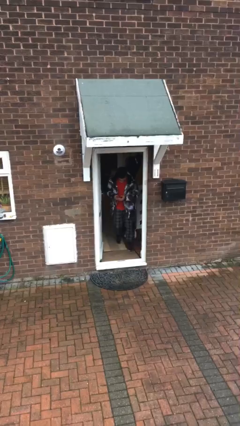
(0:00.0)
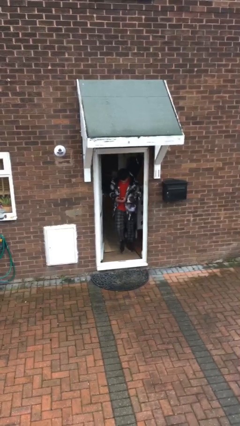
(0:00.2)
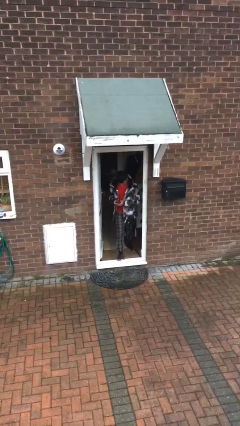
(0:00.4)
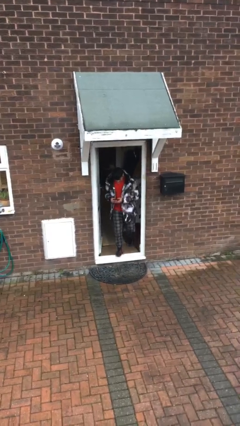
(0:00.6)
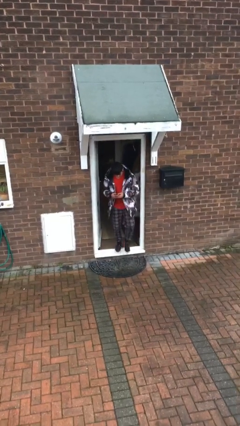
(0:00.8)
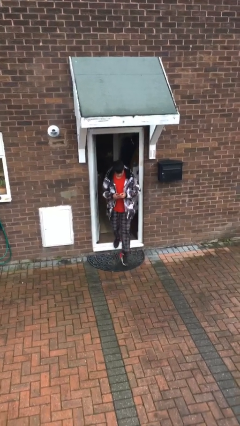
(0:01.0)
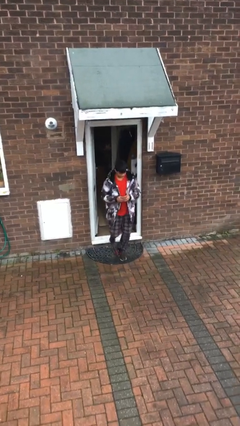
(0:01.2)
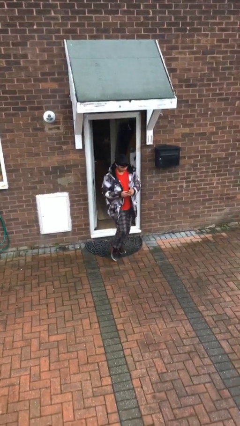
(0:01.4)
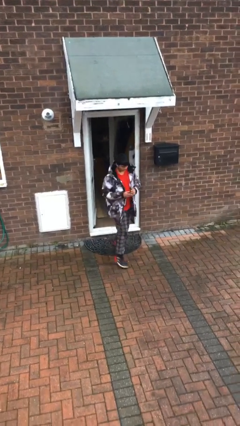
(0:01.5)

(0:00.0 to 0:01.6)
person enters scene through structure

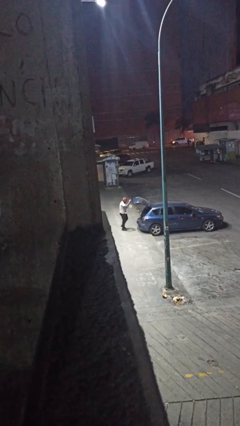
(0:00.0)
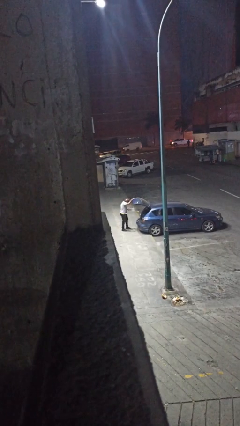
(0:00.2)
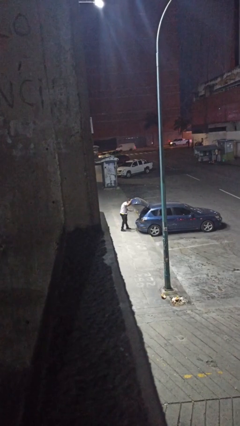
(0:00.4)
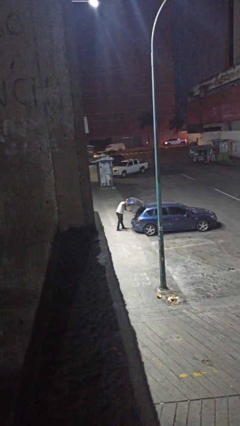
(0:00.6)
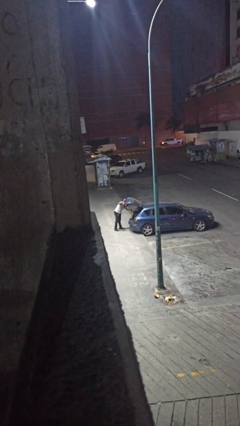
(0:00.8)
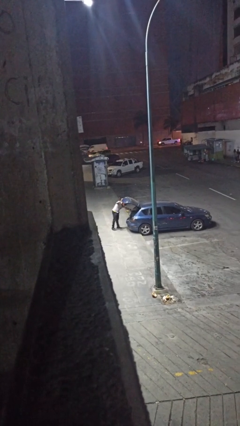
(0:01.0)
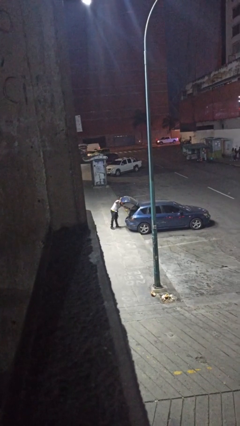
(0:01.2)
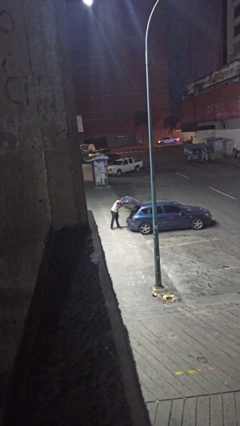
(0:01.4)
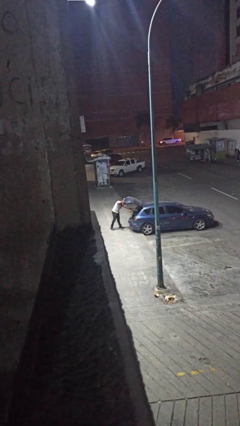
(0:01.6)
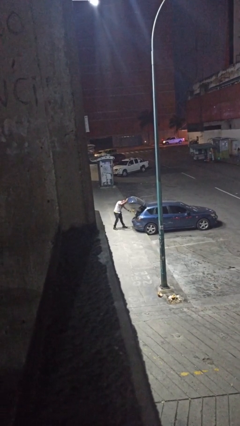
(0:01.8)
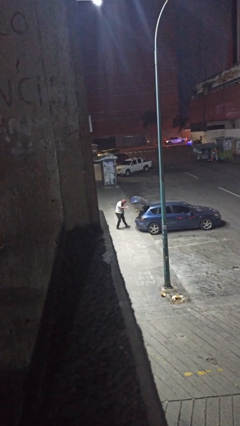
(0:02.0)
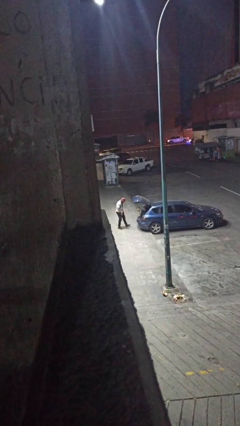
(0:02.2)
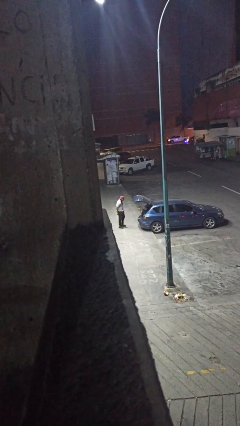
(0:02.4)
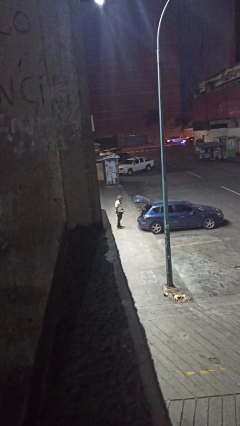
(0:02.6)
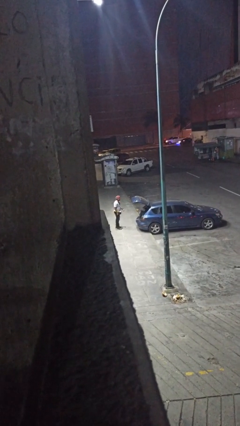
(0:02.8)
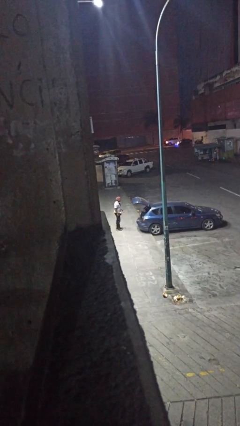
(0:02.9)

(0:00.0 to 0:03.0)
person loads car

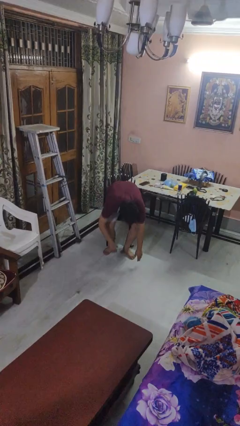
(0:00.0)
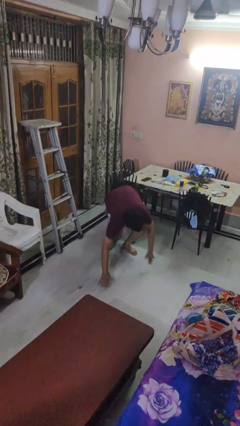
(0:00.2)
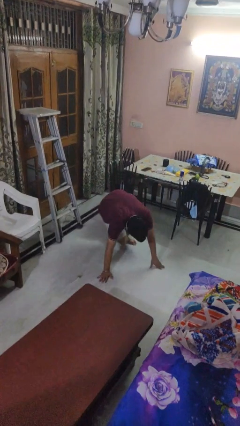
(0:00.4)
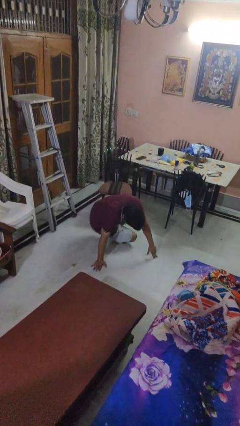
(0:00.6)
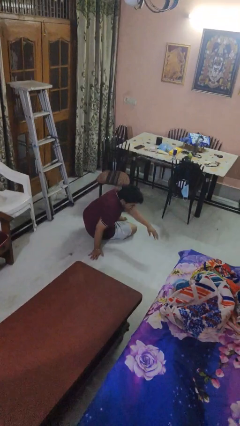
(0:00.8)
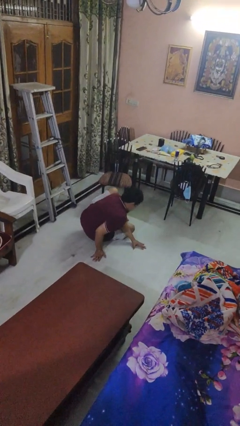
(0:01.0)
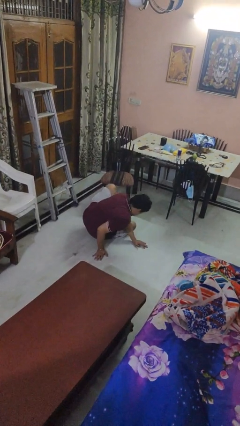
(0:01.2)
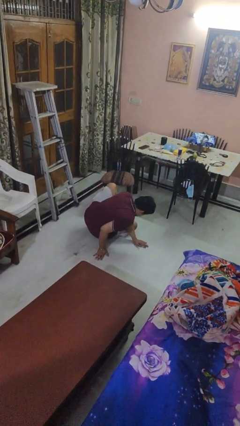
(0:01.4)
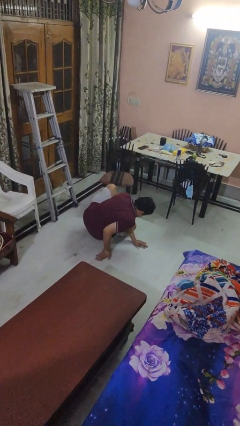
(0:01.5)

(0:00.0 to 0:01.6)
person falls while standing

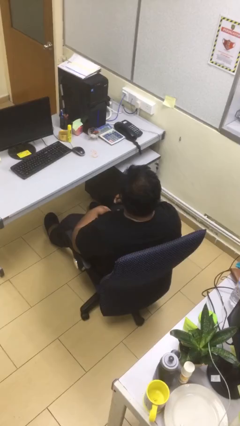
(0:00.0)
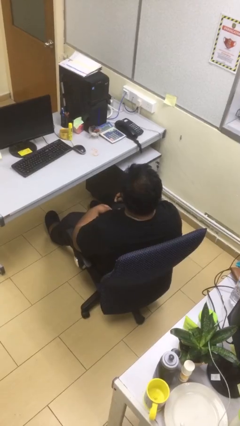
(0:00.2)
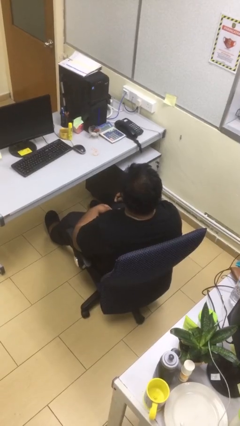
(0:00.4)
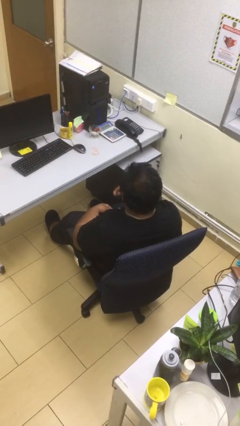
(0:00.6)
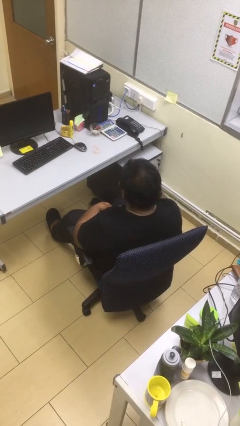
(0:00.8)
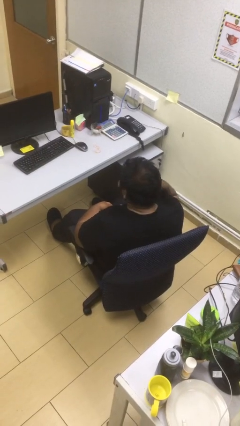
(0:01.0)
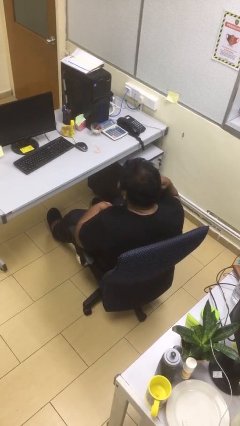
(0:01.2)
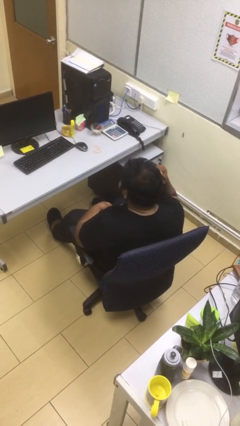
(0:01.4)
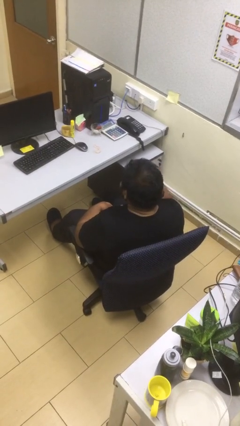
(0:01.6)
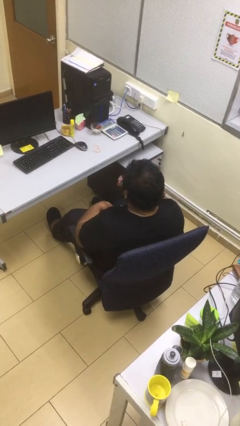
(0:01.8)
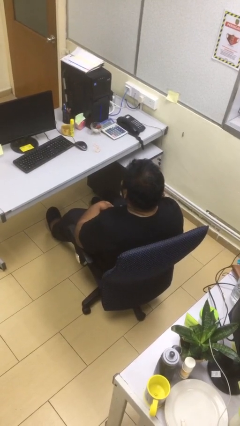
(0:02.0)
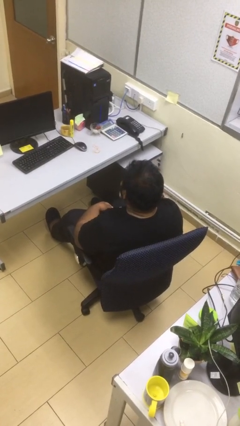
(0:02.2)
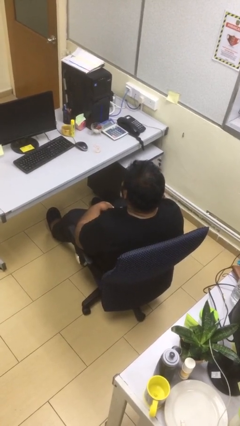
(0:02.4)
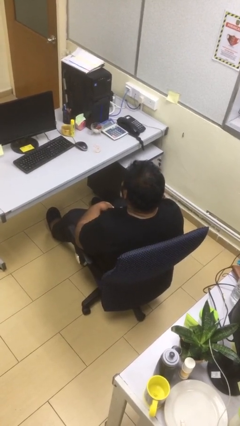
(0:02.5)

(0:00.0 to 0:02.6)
person takes off earrings

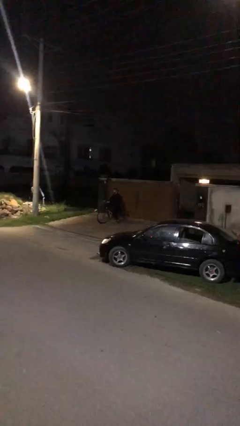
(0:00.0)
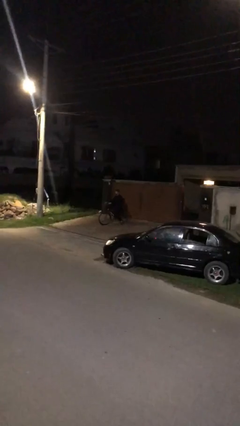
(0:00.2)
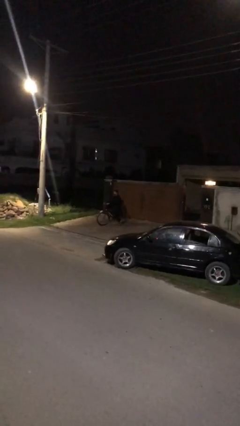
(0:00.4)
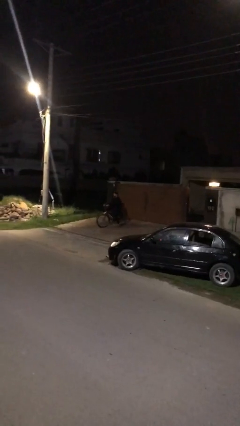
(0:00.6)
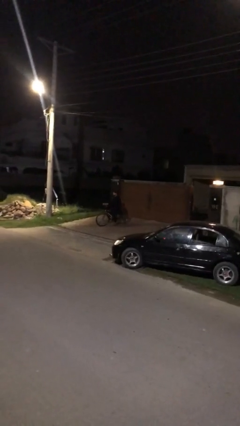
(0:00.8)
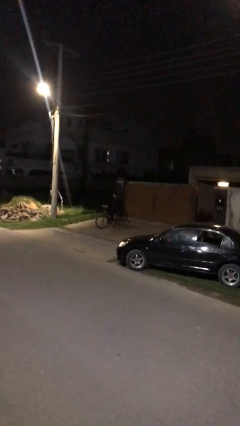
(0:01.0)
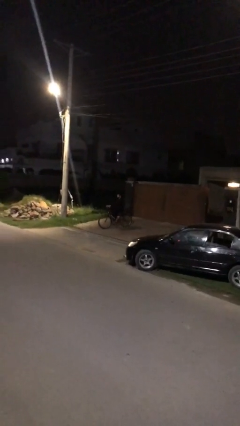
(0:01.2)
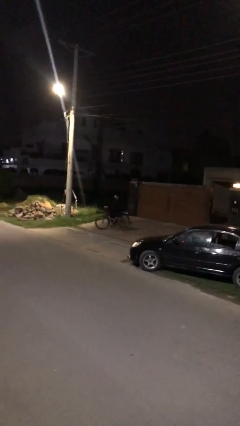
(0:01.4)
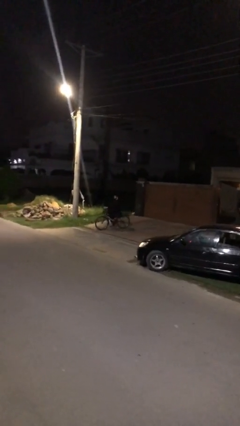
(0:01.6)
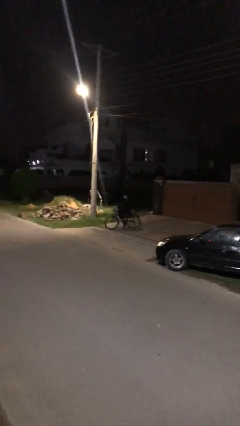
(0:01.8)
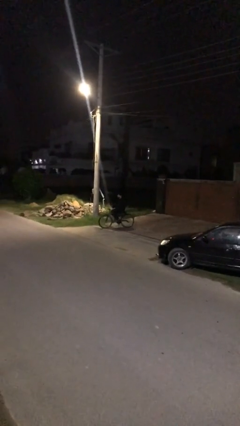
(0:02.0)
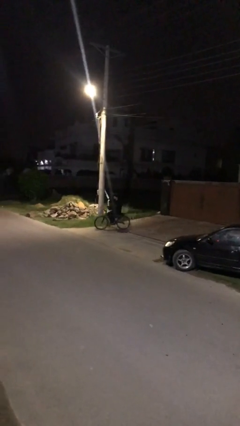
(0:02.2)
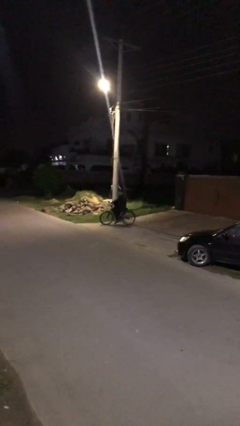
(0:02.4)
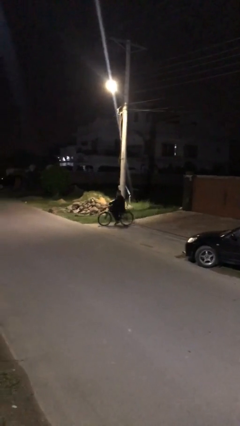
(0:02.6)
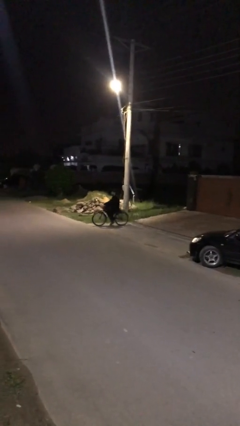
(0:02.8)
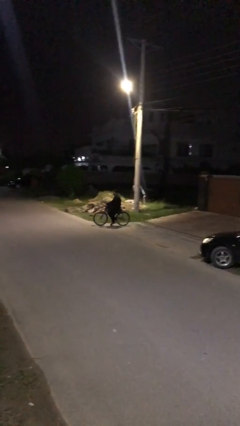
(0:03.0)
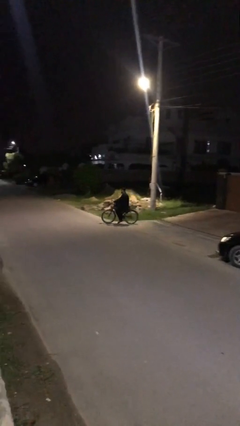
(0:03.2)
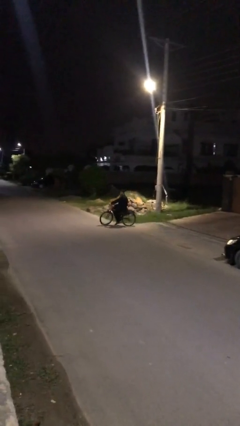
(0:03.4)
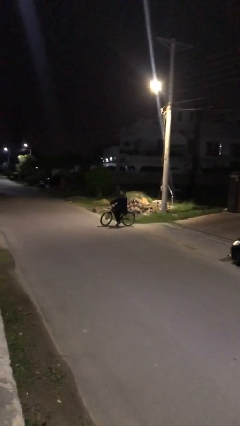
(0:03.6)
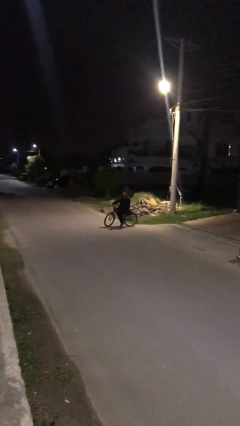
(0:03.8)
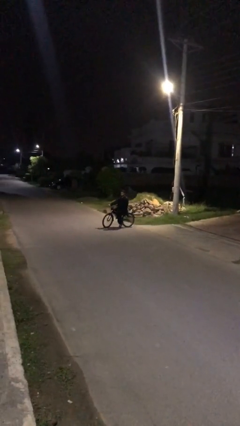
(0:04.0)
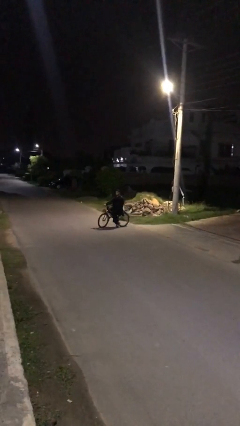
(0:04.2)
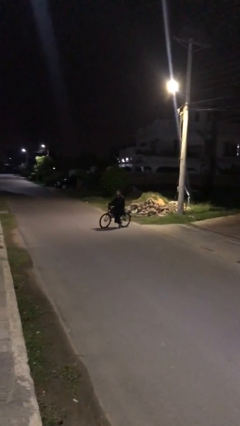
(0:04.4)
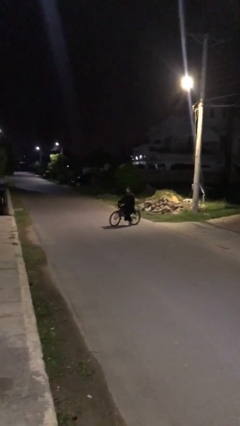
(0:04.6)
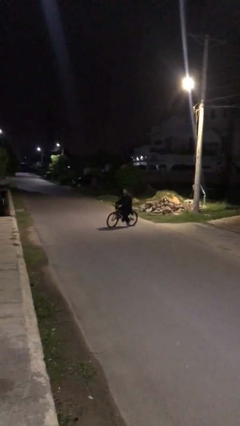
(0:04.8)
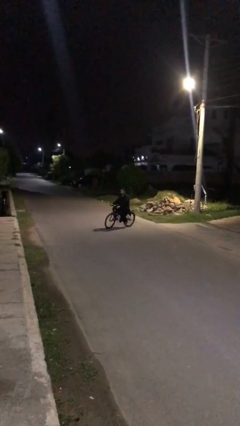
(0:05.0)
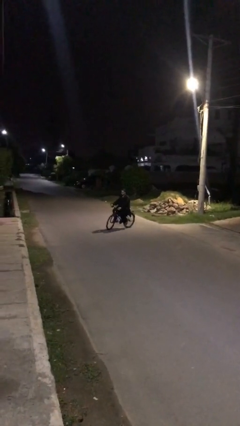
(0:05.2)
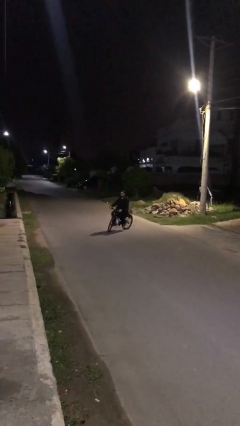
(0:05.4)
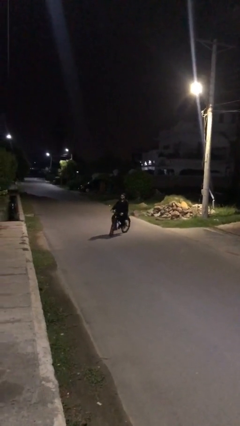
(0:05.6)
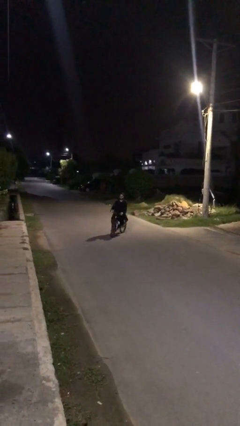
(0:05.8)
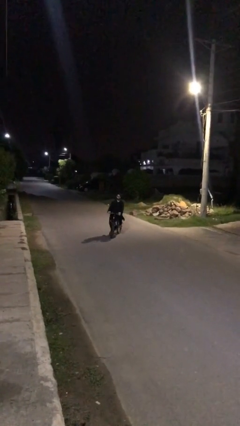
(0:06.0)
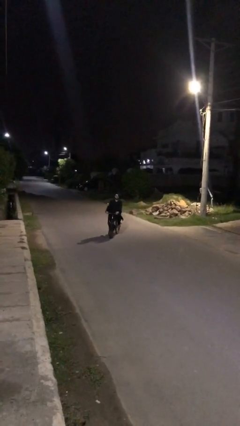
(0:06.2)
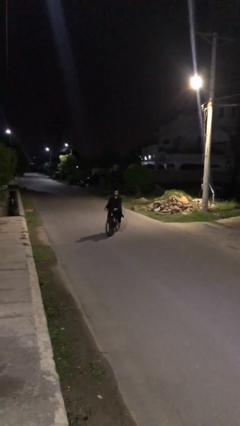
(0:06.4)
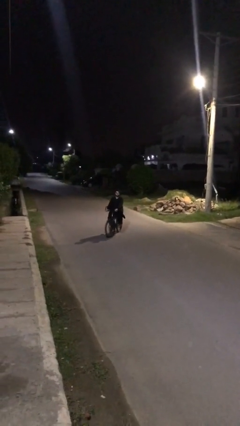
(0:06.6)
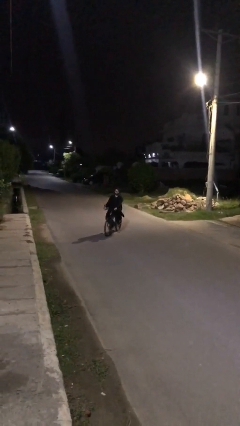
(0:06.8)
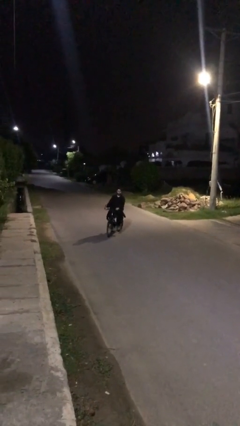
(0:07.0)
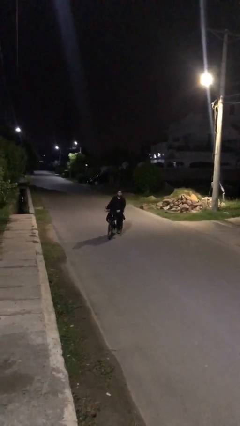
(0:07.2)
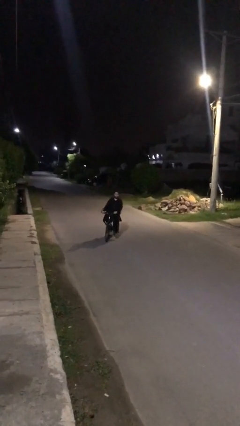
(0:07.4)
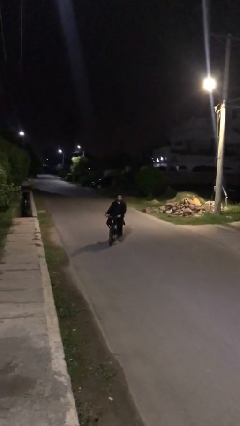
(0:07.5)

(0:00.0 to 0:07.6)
person rides bicycle

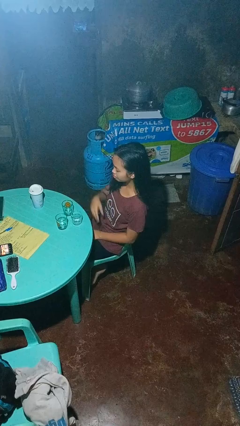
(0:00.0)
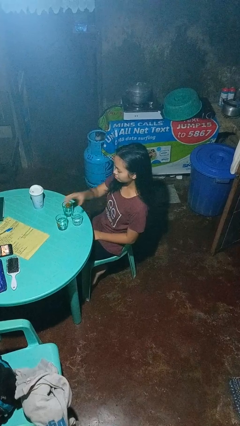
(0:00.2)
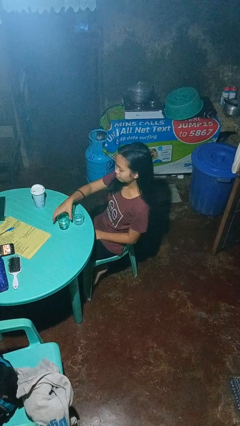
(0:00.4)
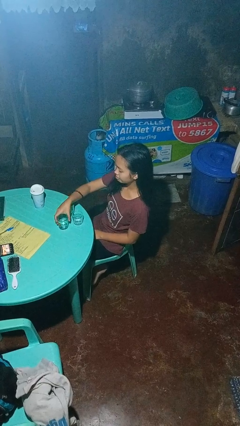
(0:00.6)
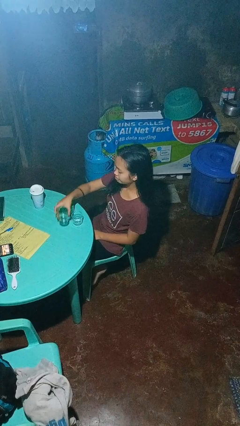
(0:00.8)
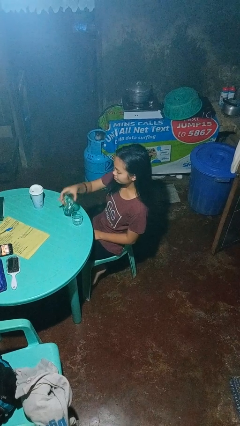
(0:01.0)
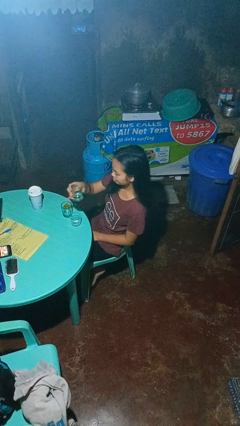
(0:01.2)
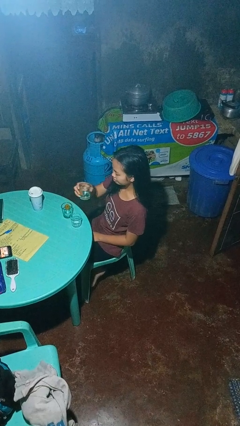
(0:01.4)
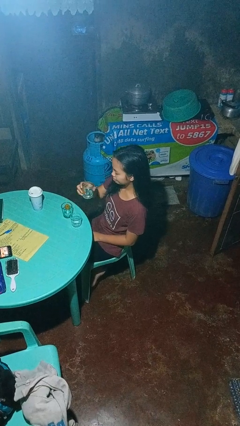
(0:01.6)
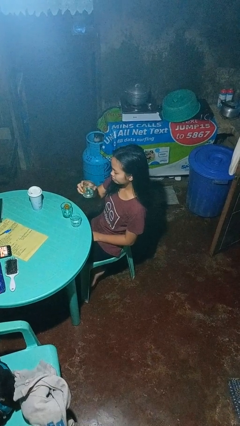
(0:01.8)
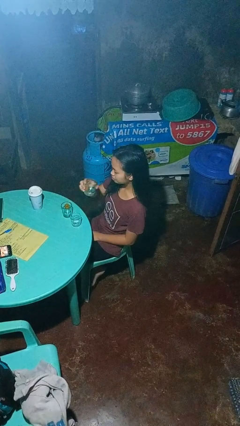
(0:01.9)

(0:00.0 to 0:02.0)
person picks up object from table
